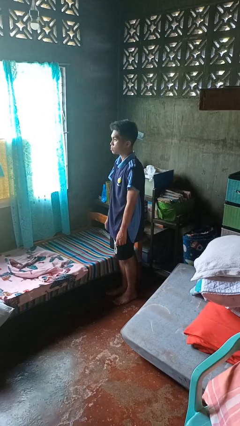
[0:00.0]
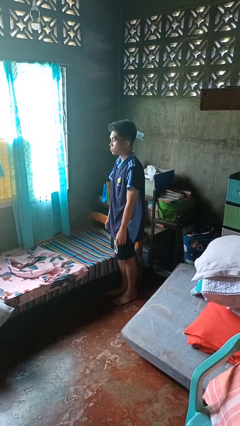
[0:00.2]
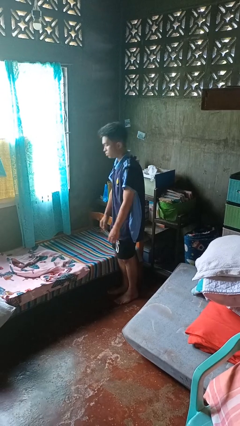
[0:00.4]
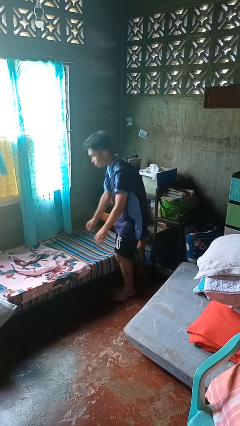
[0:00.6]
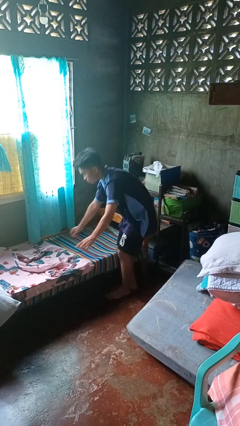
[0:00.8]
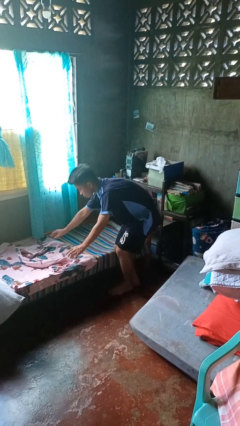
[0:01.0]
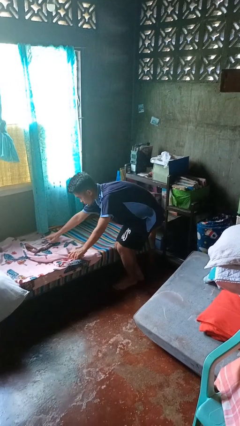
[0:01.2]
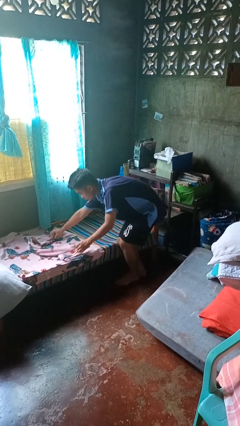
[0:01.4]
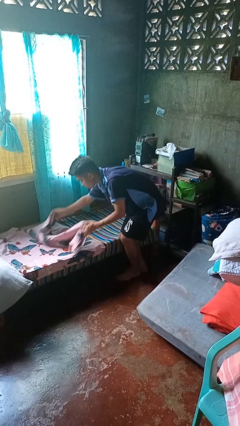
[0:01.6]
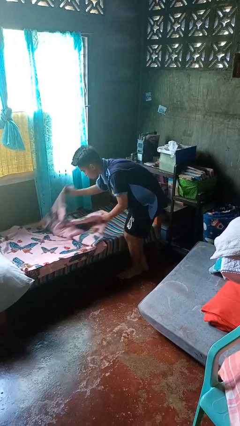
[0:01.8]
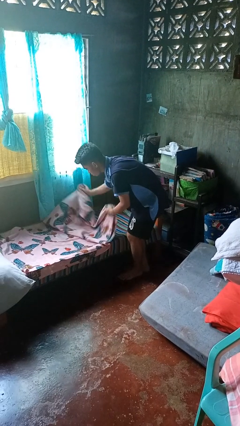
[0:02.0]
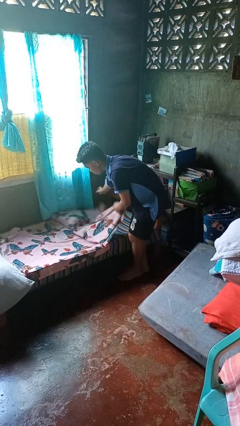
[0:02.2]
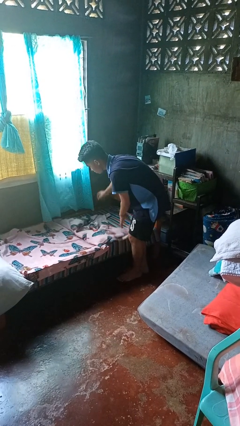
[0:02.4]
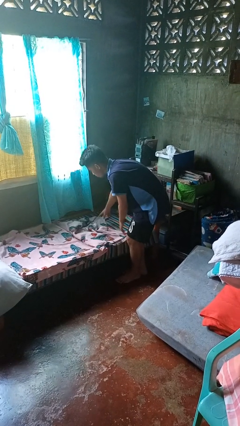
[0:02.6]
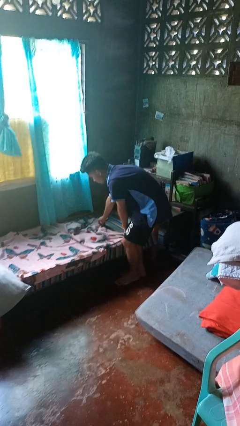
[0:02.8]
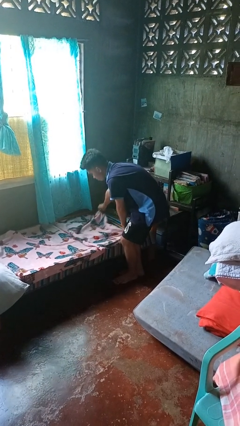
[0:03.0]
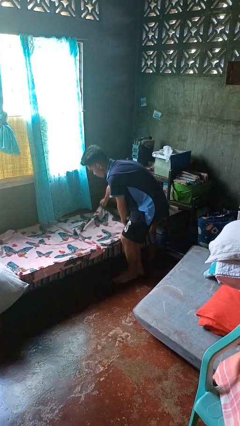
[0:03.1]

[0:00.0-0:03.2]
person makes bed

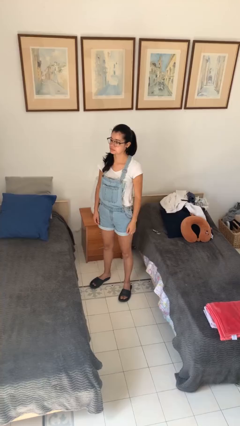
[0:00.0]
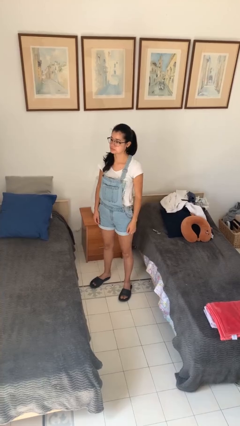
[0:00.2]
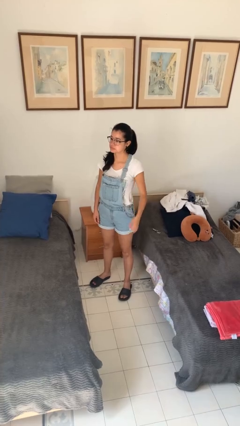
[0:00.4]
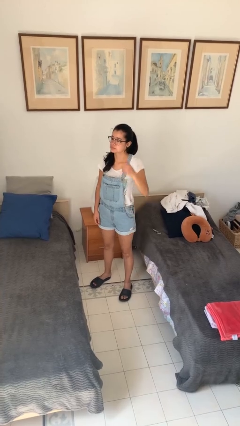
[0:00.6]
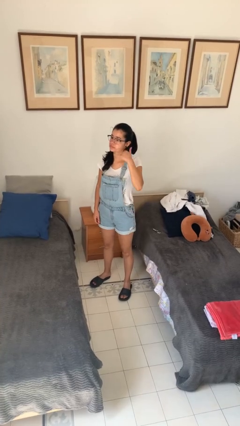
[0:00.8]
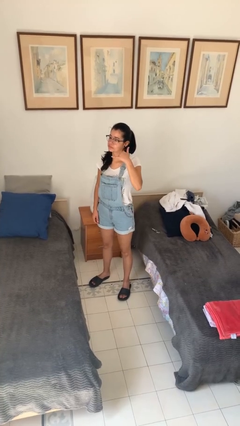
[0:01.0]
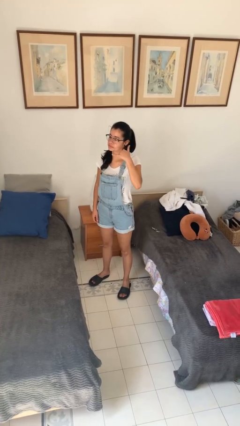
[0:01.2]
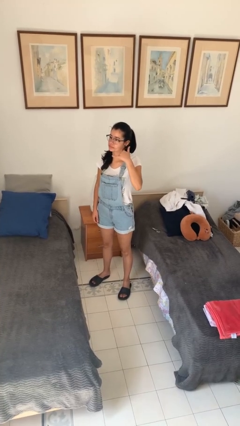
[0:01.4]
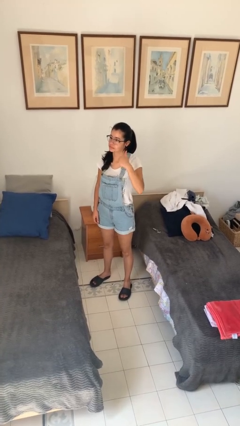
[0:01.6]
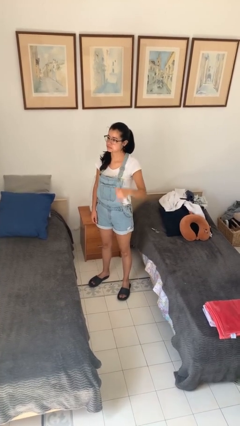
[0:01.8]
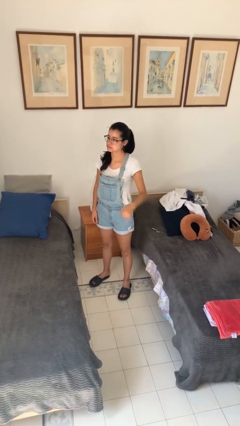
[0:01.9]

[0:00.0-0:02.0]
person gestures call me

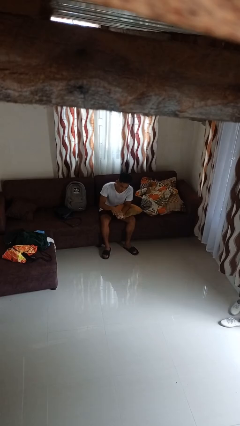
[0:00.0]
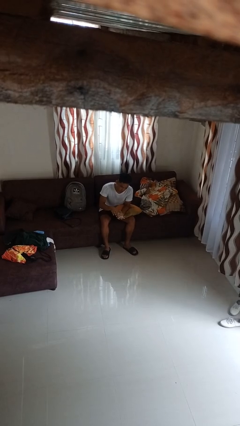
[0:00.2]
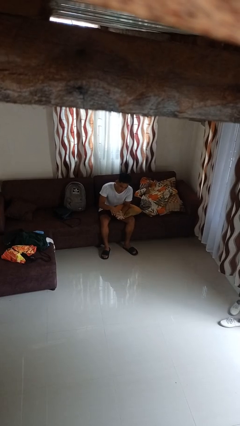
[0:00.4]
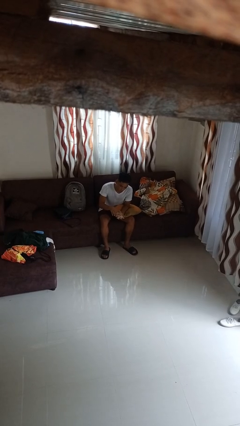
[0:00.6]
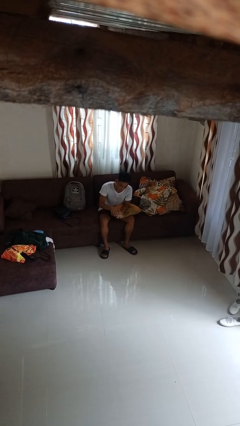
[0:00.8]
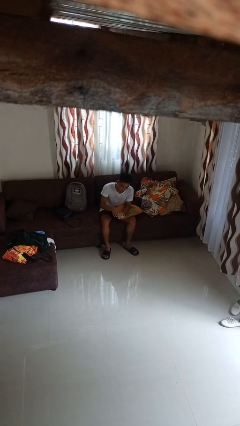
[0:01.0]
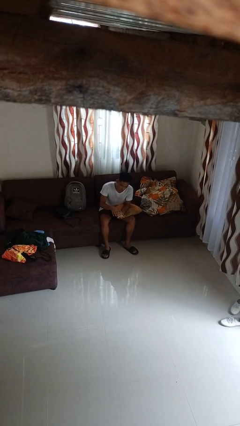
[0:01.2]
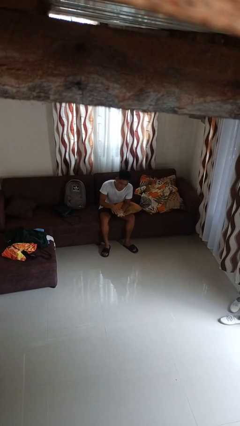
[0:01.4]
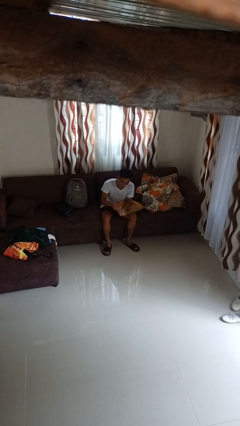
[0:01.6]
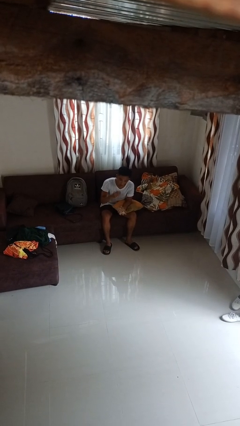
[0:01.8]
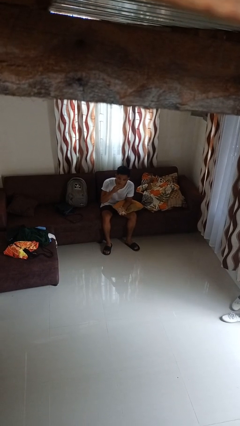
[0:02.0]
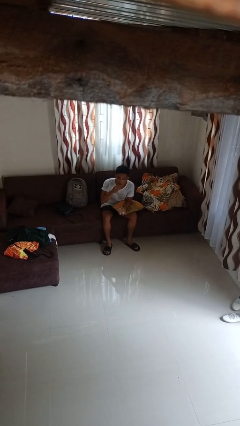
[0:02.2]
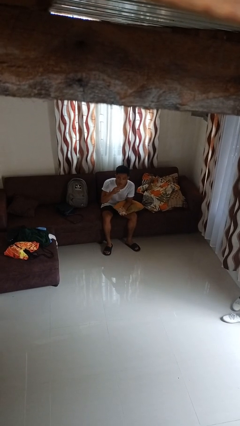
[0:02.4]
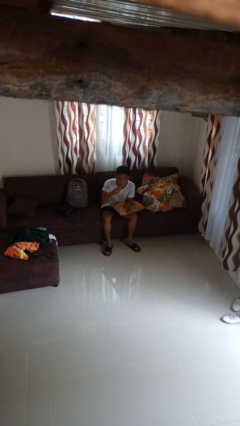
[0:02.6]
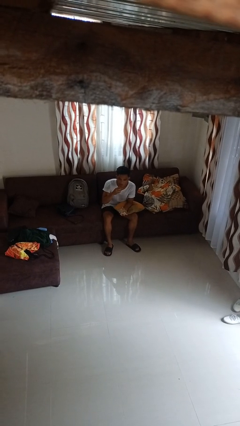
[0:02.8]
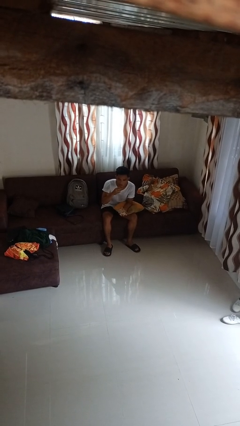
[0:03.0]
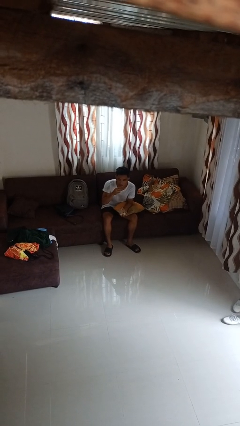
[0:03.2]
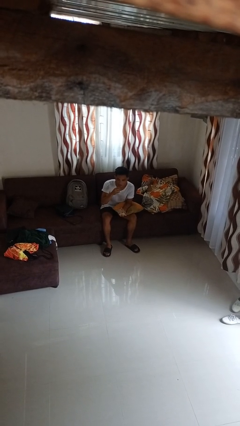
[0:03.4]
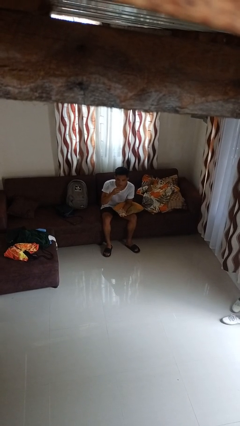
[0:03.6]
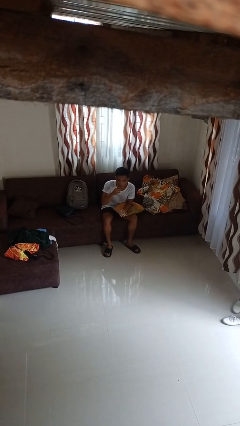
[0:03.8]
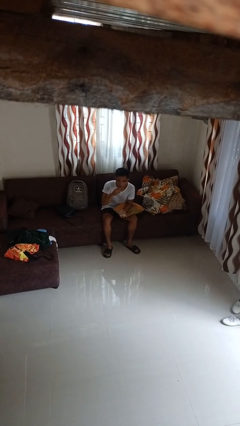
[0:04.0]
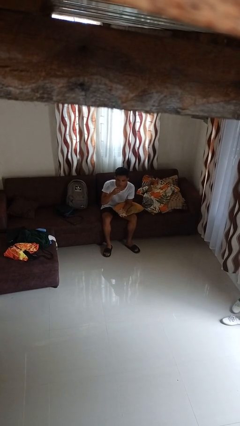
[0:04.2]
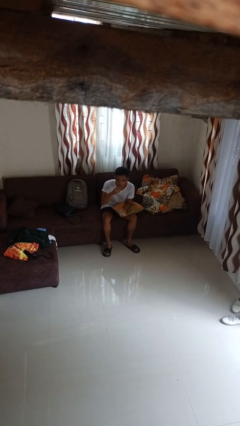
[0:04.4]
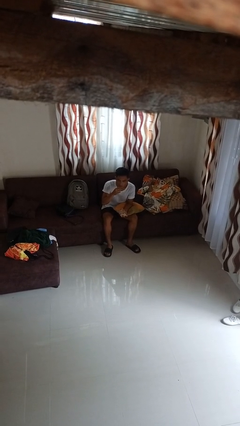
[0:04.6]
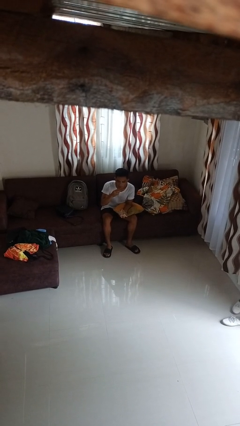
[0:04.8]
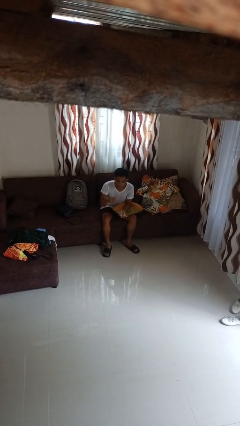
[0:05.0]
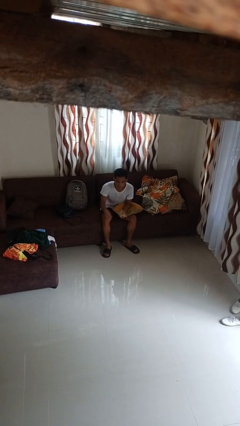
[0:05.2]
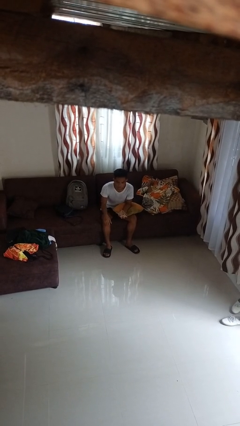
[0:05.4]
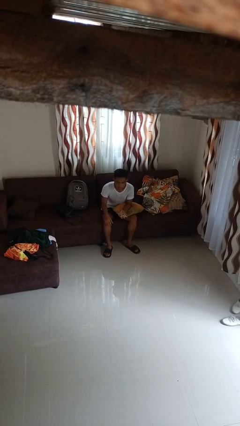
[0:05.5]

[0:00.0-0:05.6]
person eats snack from bag

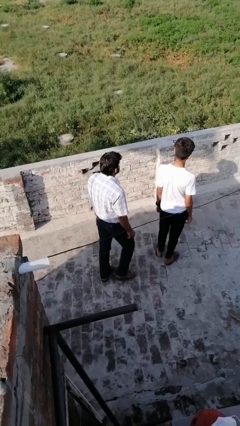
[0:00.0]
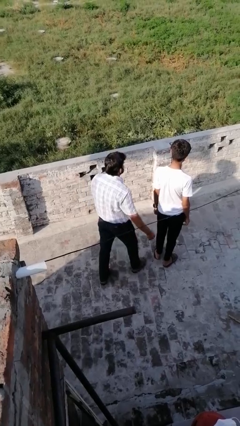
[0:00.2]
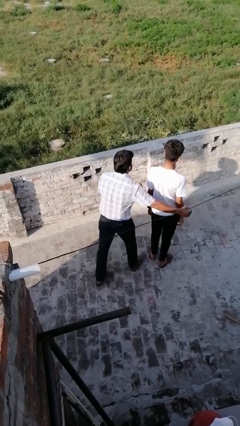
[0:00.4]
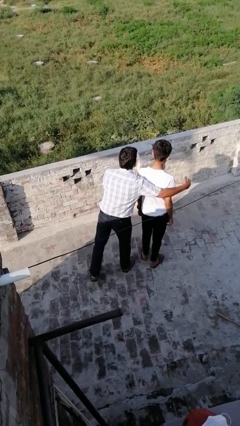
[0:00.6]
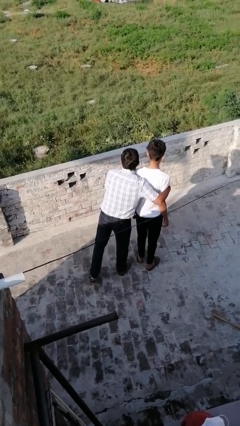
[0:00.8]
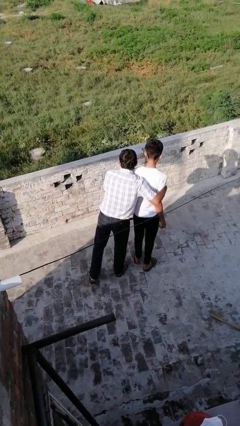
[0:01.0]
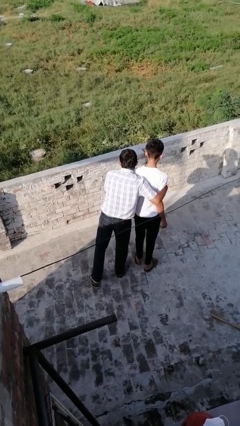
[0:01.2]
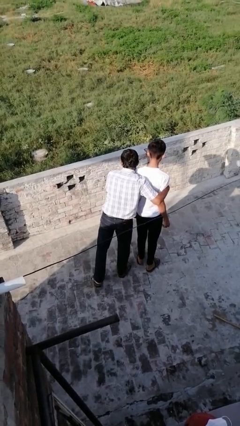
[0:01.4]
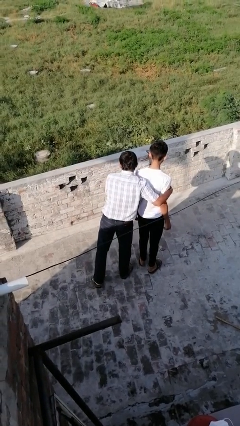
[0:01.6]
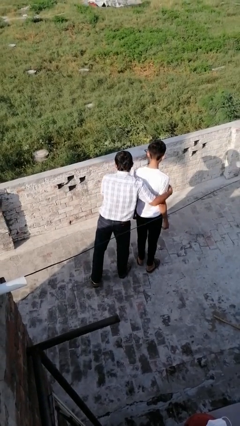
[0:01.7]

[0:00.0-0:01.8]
person hugs person from behind

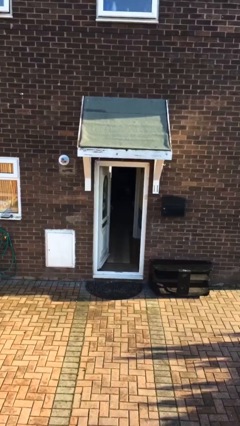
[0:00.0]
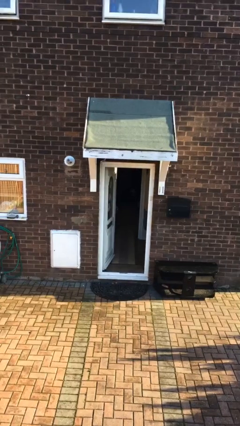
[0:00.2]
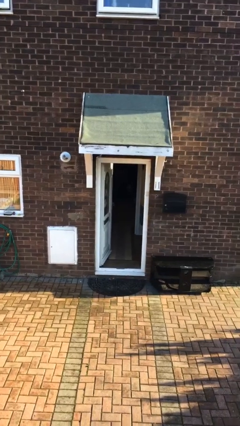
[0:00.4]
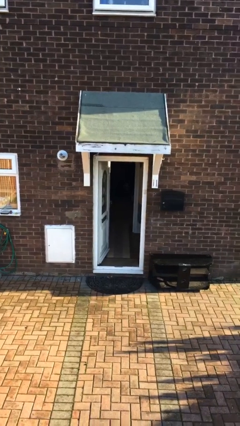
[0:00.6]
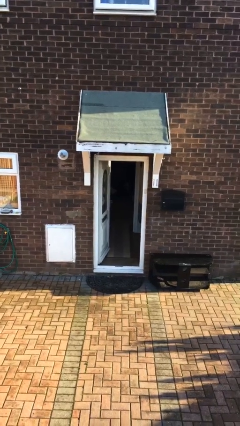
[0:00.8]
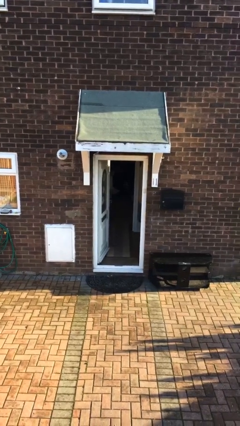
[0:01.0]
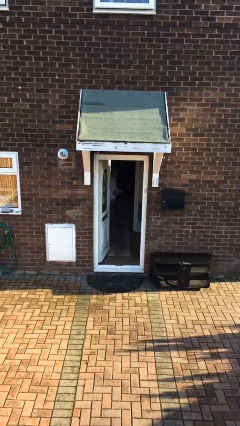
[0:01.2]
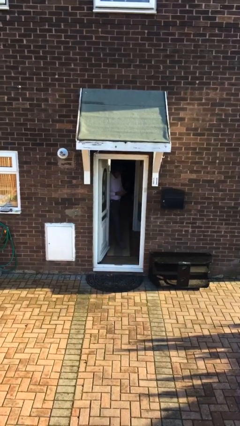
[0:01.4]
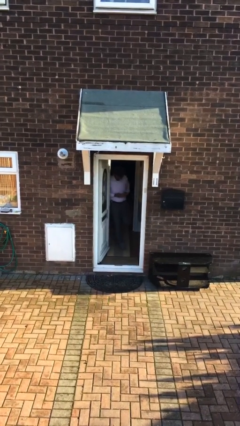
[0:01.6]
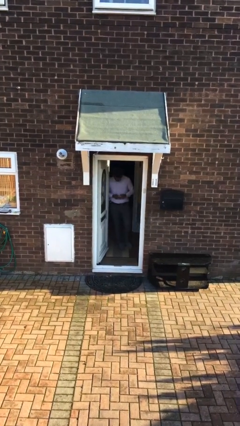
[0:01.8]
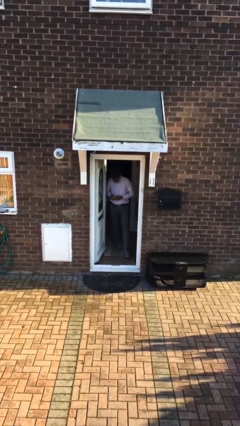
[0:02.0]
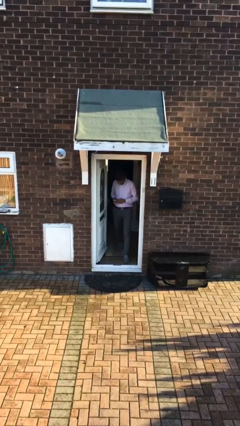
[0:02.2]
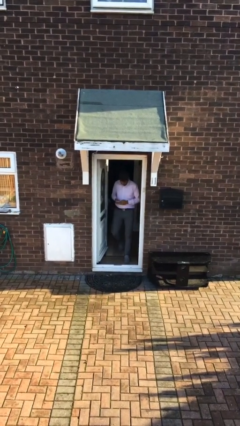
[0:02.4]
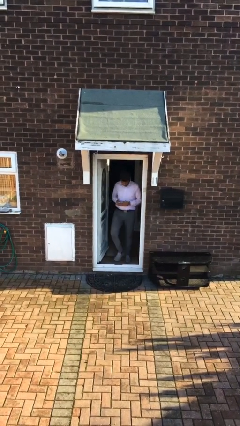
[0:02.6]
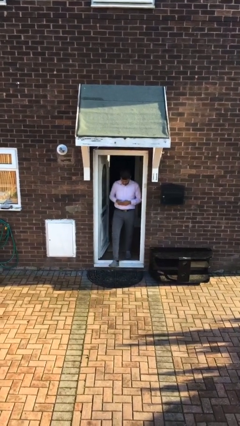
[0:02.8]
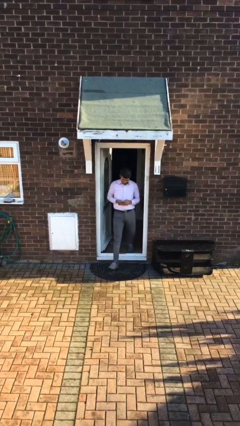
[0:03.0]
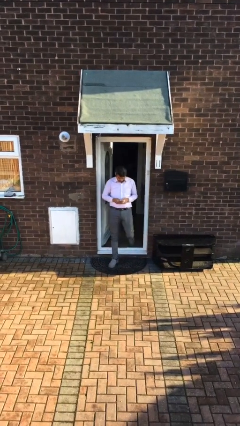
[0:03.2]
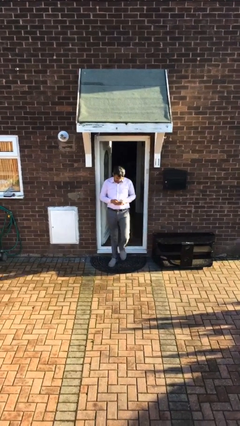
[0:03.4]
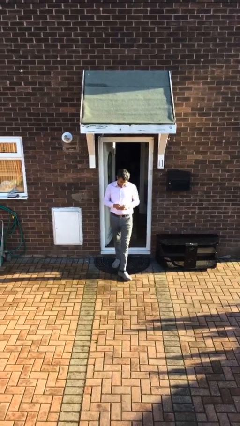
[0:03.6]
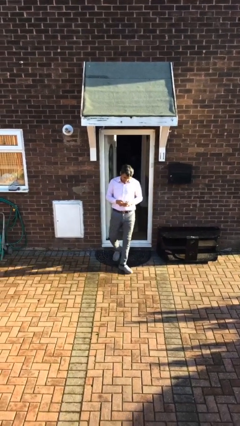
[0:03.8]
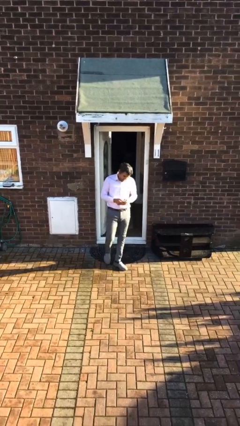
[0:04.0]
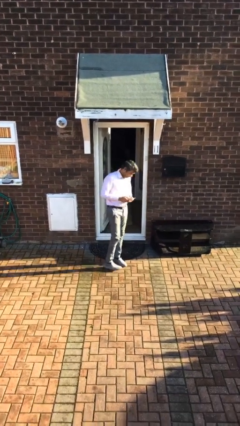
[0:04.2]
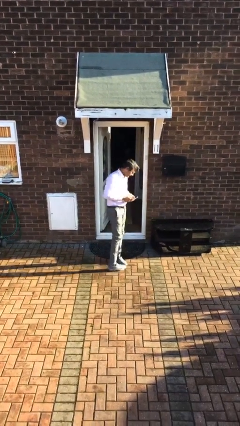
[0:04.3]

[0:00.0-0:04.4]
person enters scene through structure

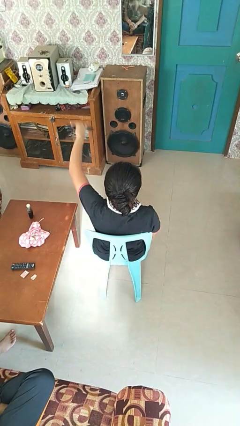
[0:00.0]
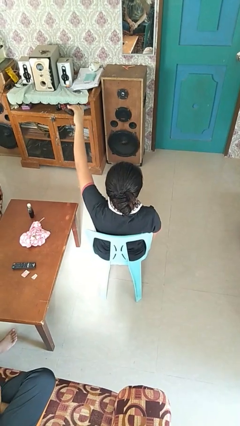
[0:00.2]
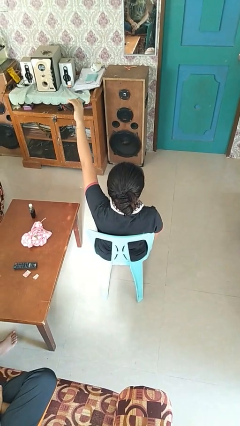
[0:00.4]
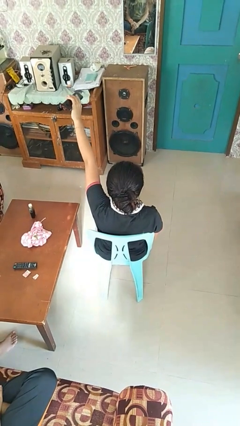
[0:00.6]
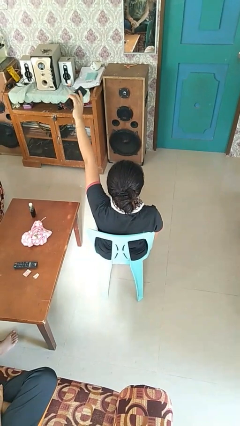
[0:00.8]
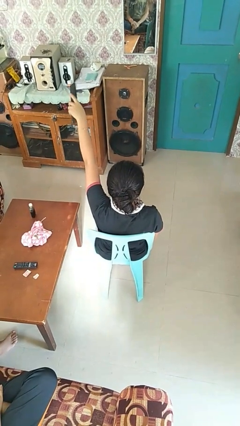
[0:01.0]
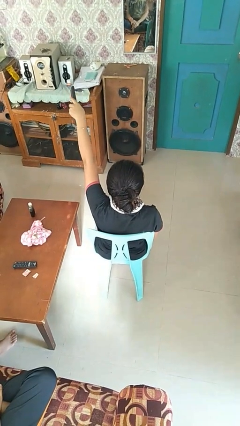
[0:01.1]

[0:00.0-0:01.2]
person uses television remote
